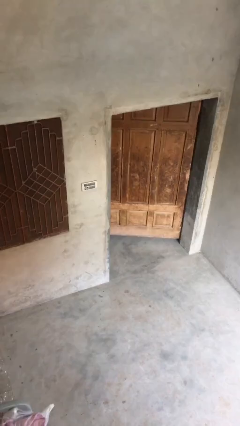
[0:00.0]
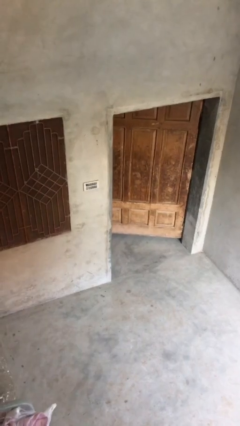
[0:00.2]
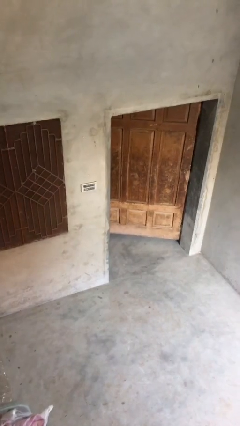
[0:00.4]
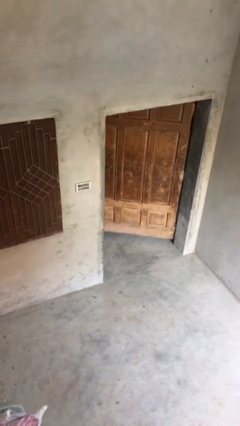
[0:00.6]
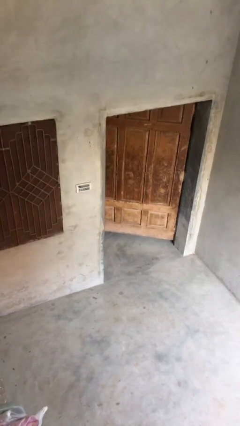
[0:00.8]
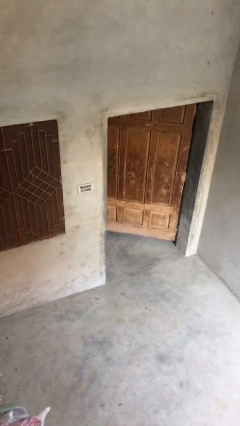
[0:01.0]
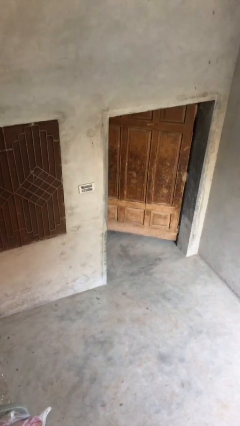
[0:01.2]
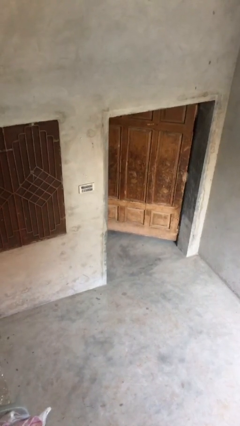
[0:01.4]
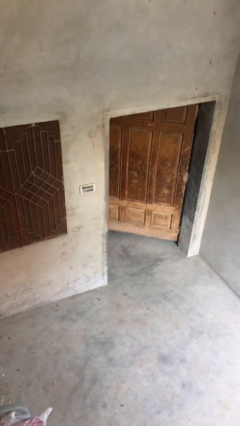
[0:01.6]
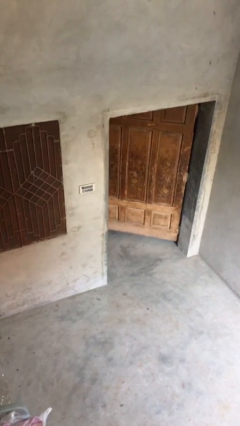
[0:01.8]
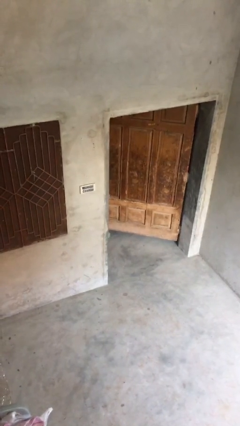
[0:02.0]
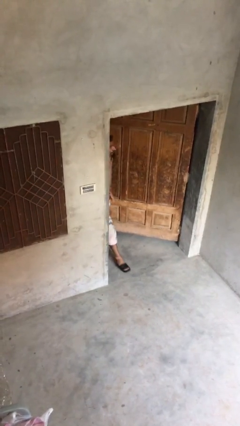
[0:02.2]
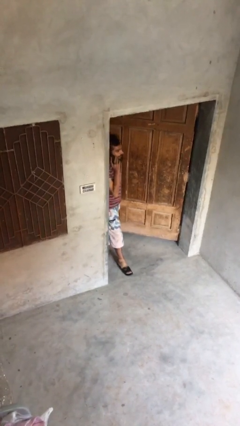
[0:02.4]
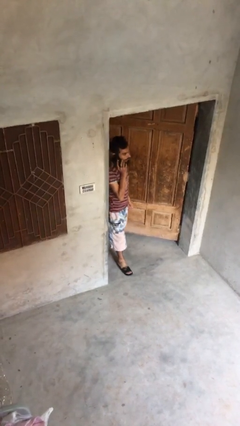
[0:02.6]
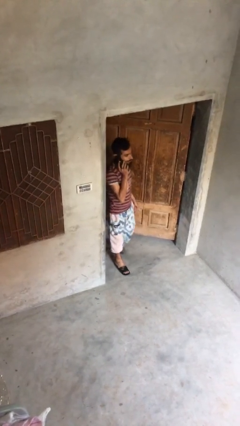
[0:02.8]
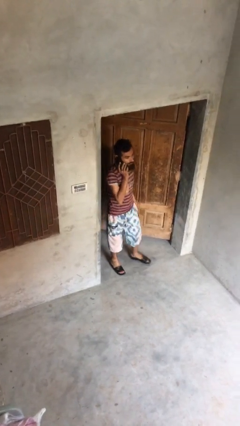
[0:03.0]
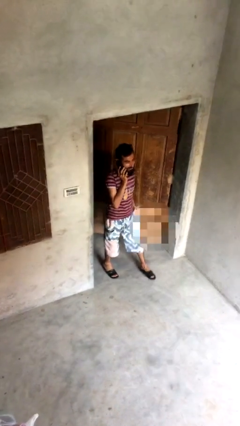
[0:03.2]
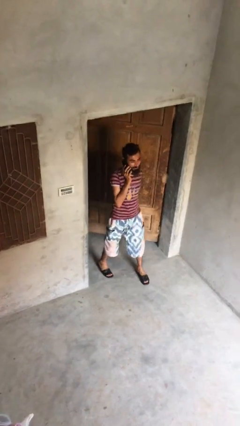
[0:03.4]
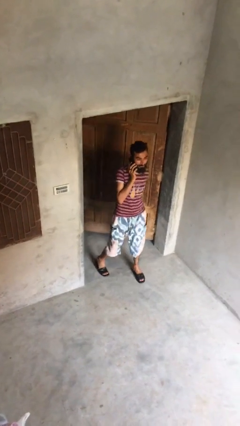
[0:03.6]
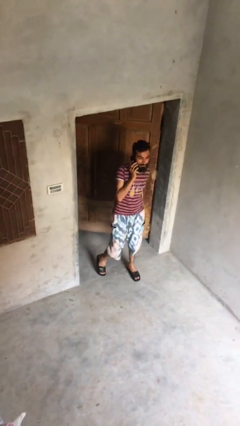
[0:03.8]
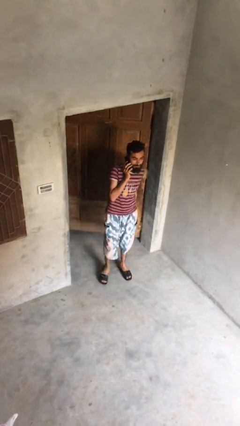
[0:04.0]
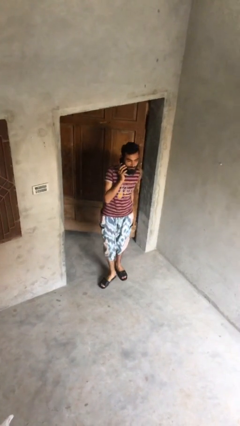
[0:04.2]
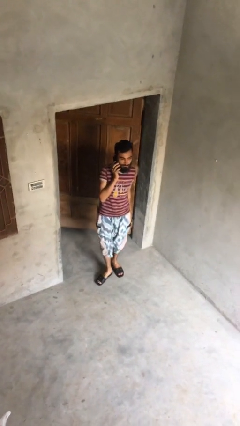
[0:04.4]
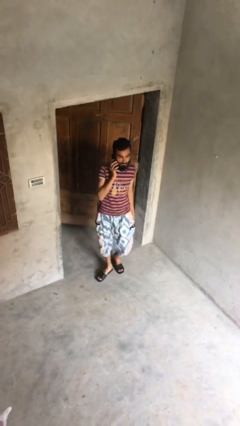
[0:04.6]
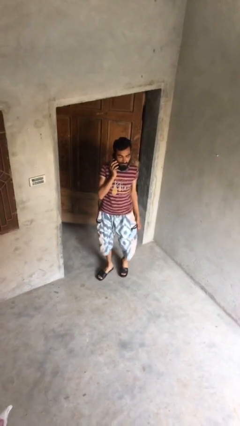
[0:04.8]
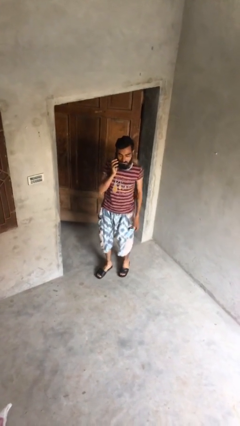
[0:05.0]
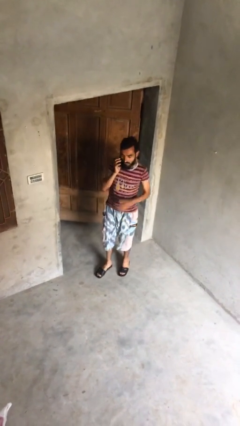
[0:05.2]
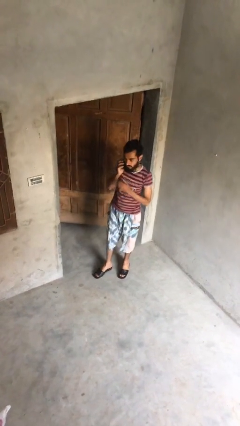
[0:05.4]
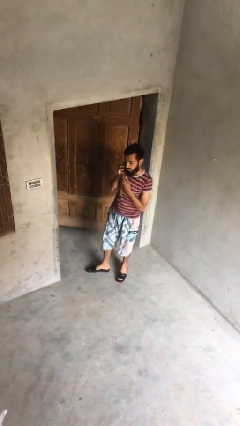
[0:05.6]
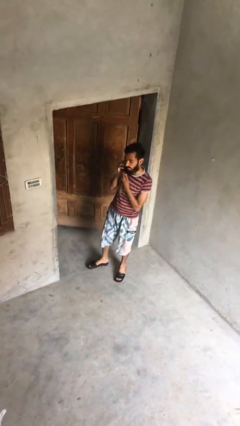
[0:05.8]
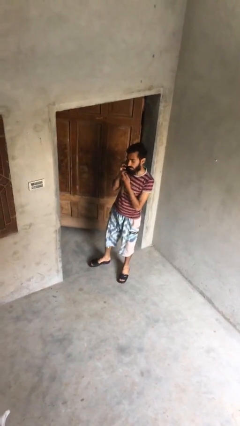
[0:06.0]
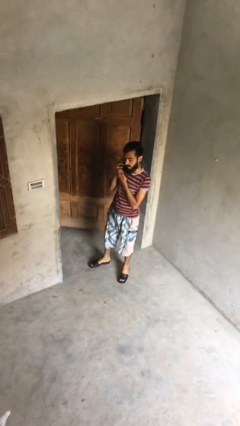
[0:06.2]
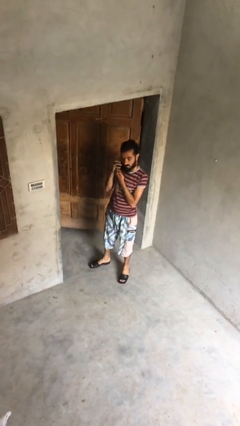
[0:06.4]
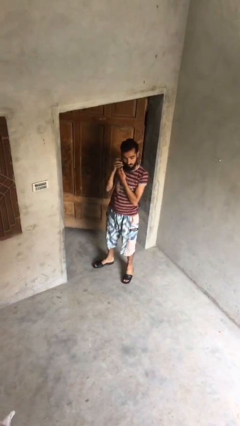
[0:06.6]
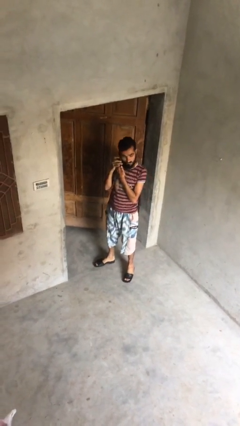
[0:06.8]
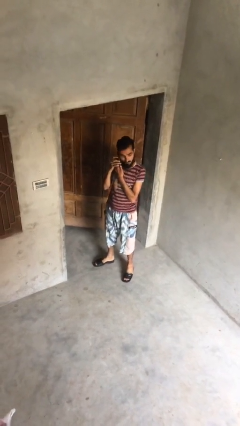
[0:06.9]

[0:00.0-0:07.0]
person enters scene through structure

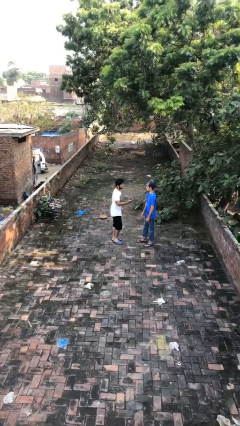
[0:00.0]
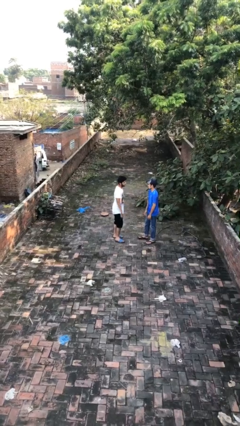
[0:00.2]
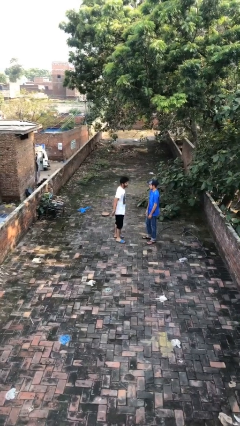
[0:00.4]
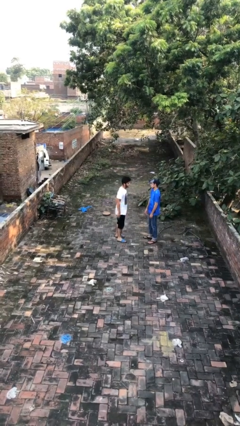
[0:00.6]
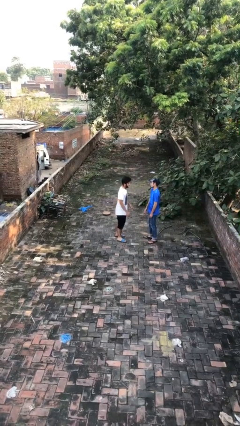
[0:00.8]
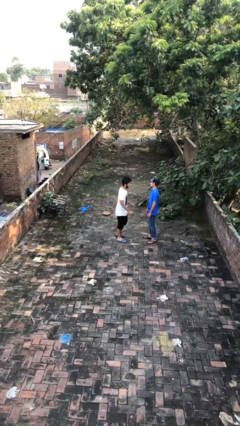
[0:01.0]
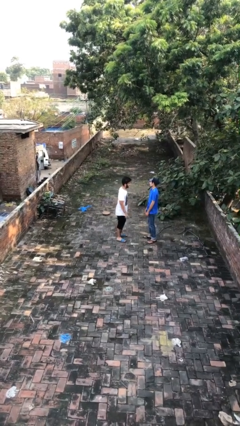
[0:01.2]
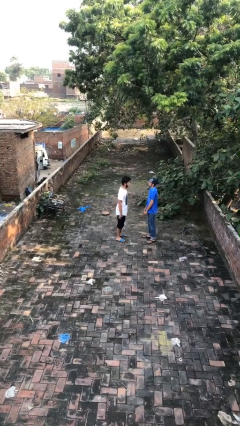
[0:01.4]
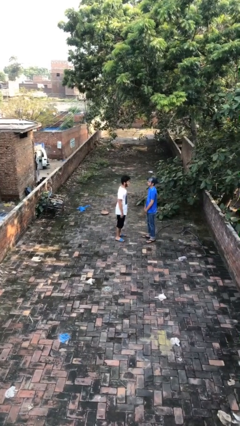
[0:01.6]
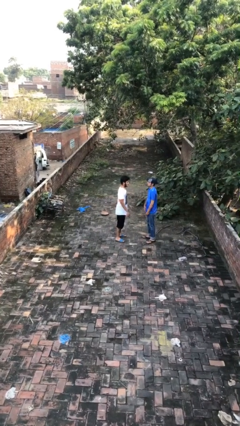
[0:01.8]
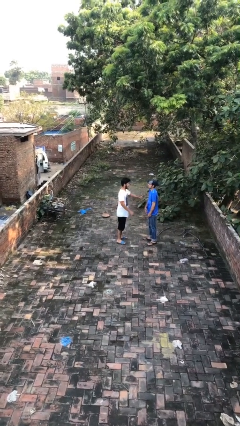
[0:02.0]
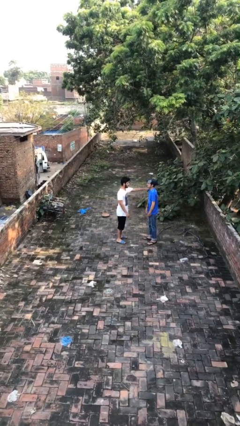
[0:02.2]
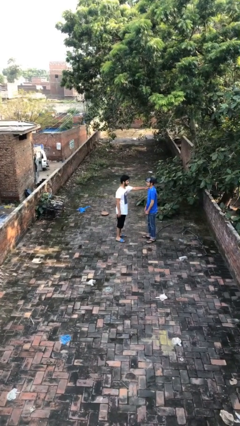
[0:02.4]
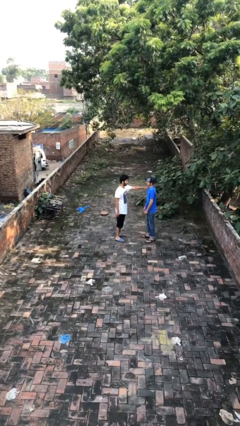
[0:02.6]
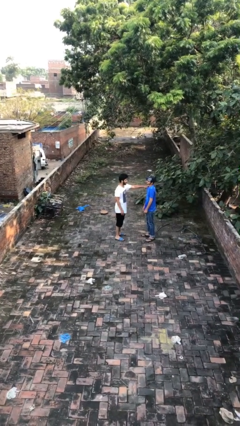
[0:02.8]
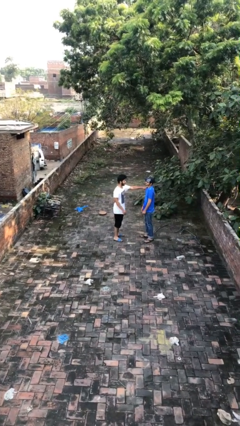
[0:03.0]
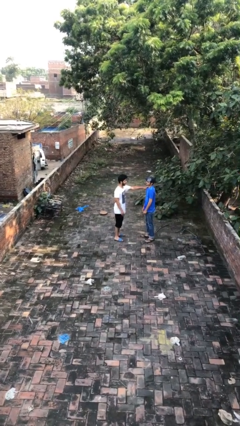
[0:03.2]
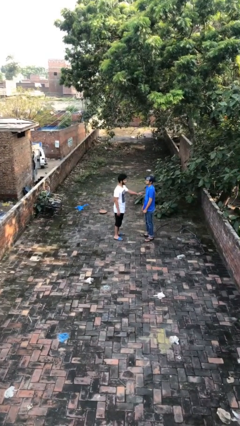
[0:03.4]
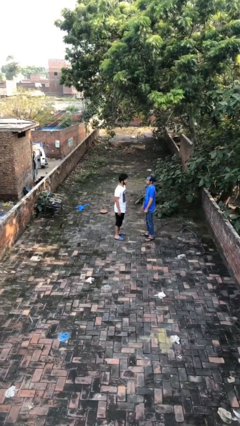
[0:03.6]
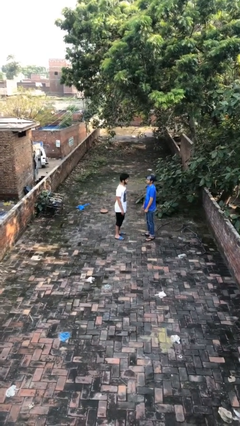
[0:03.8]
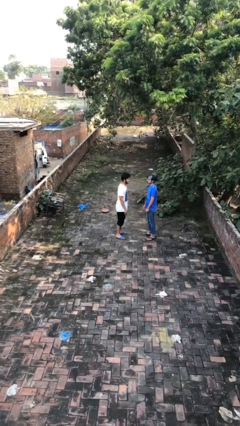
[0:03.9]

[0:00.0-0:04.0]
person talks to person

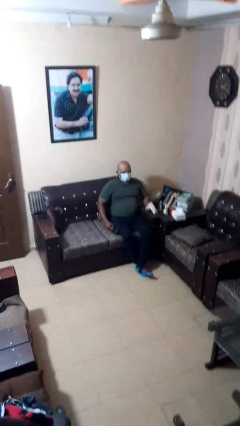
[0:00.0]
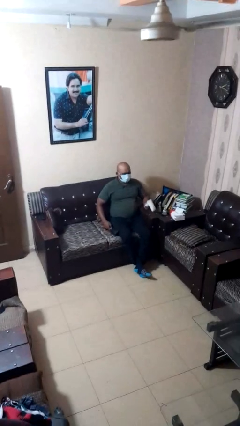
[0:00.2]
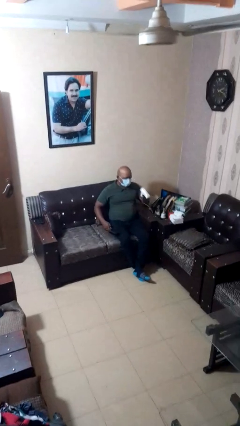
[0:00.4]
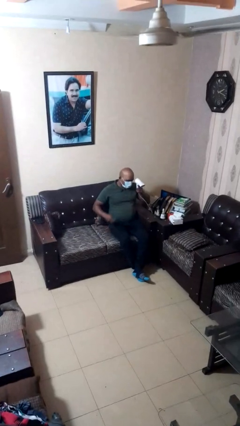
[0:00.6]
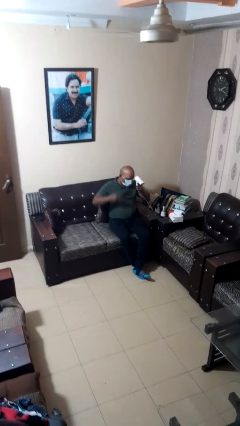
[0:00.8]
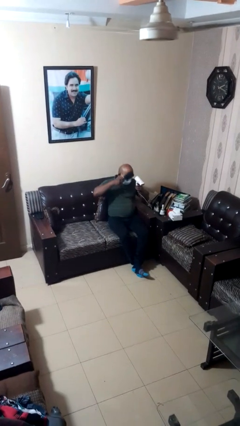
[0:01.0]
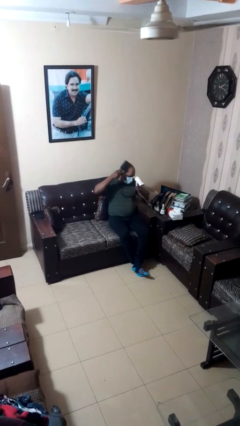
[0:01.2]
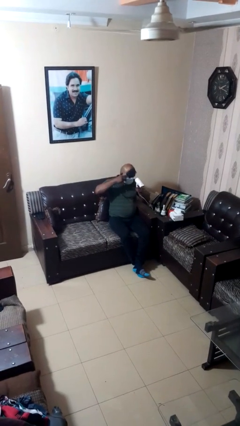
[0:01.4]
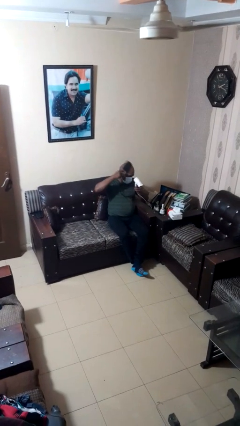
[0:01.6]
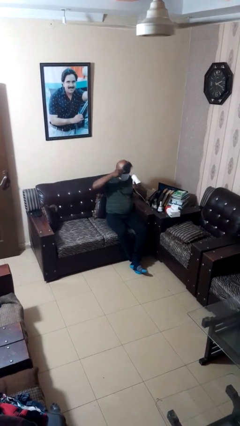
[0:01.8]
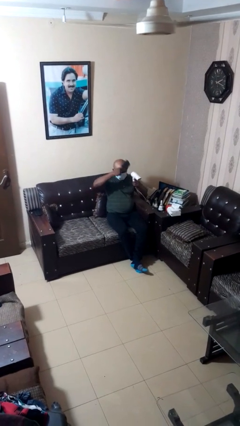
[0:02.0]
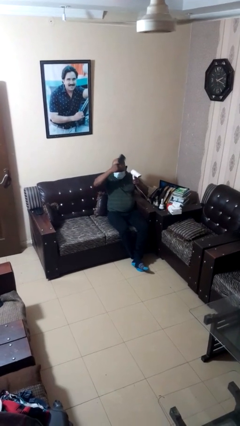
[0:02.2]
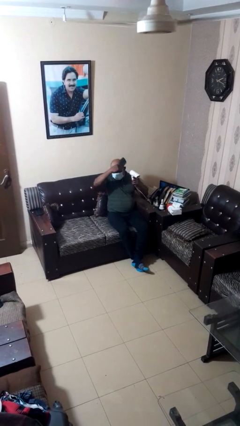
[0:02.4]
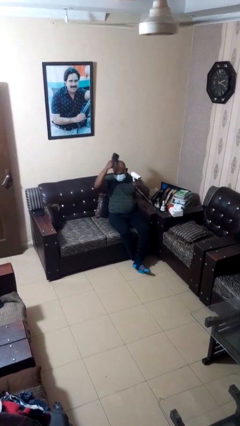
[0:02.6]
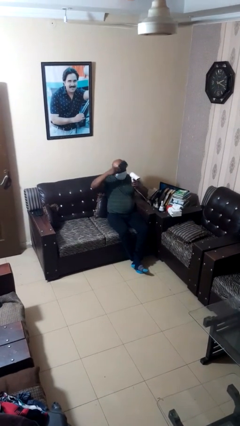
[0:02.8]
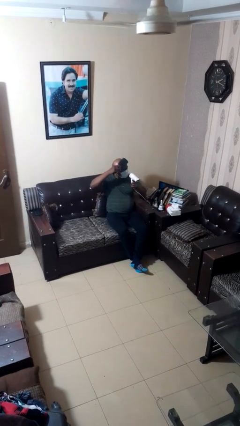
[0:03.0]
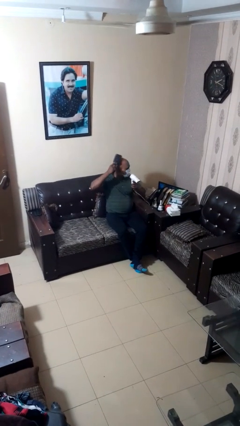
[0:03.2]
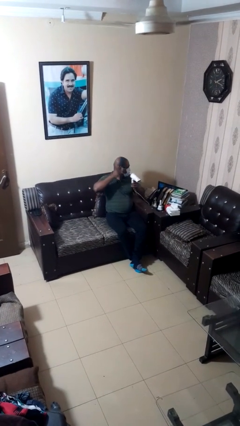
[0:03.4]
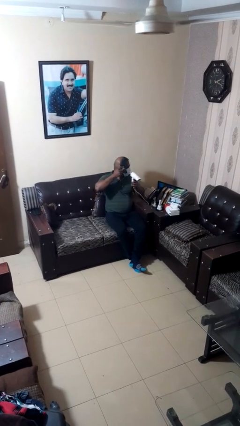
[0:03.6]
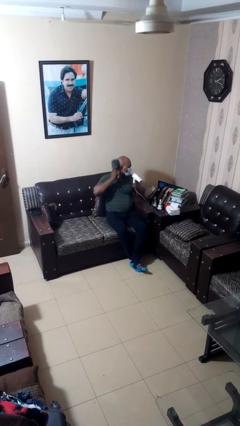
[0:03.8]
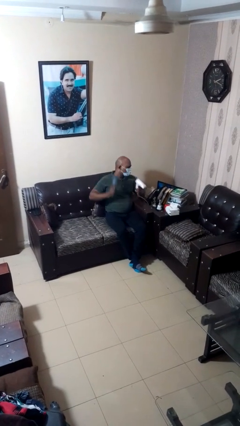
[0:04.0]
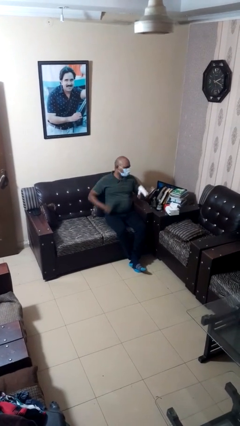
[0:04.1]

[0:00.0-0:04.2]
person dries hair with hairdryer

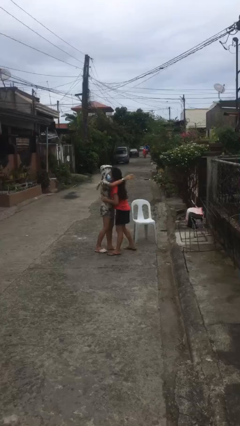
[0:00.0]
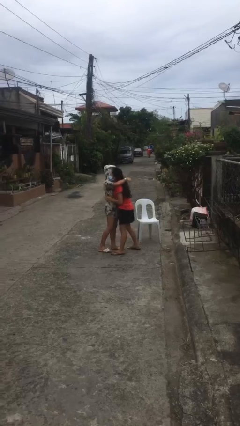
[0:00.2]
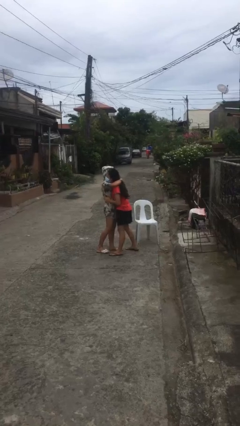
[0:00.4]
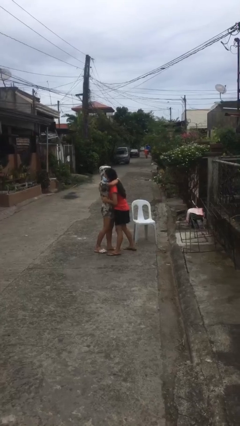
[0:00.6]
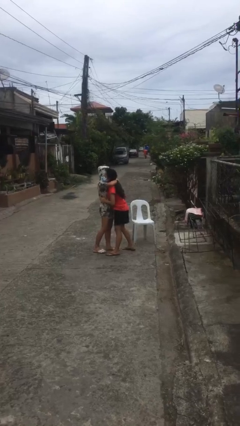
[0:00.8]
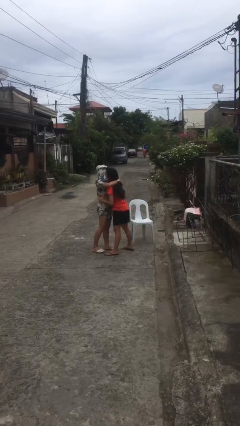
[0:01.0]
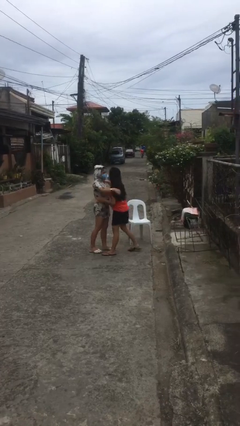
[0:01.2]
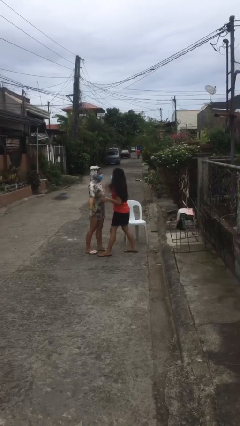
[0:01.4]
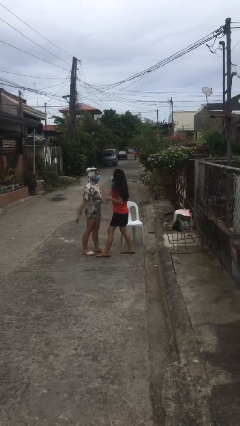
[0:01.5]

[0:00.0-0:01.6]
person embraces person

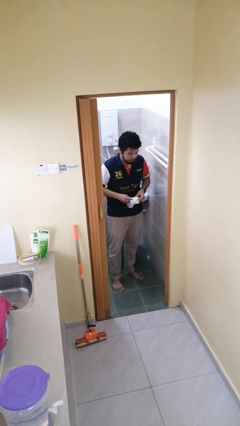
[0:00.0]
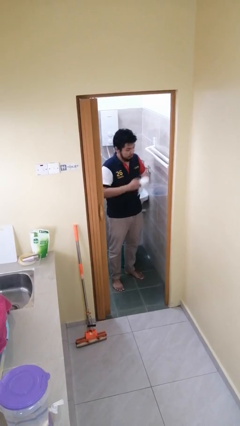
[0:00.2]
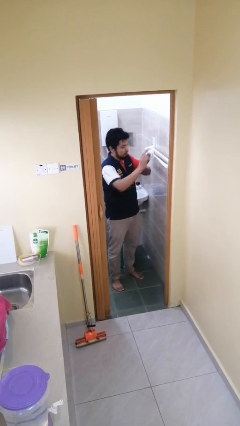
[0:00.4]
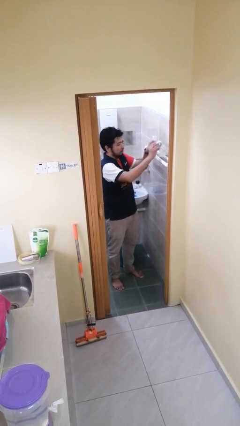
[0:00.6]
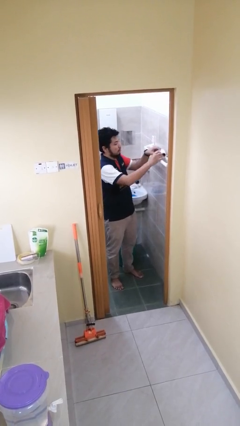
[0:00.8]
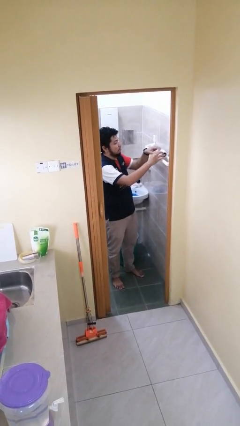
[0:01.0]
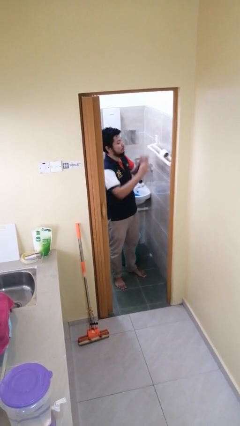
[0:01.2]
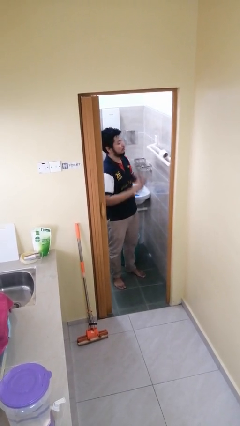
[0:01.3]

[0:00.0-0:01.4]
person puts down object on countertop
